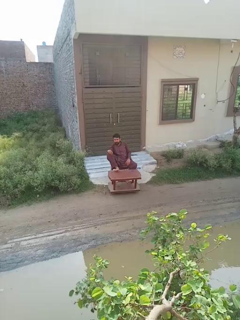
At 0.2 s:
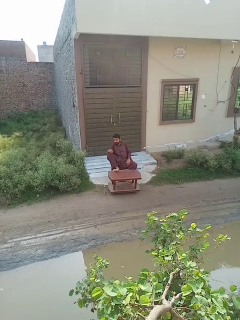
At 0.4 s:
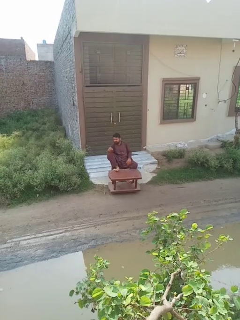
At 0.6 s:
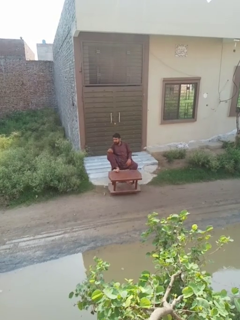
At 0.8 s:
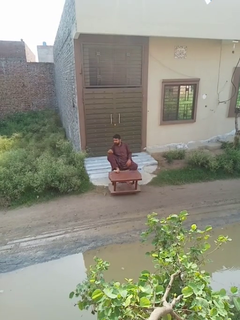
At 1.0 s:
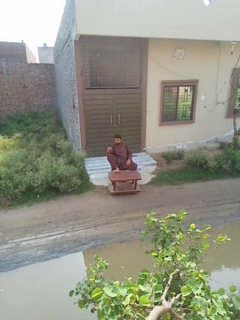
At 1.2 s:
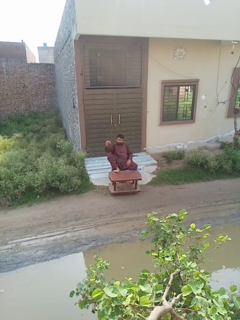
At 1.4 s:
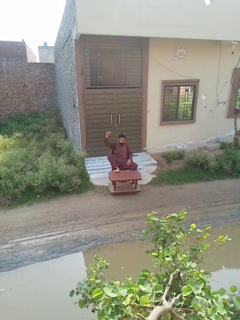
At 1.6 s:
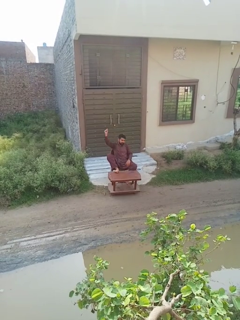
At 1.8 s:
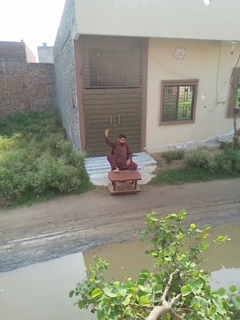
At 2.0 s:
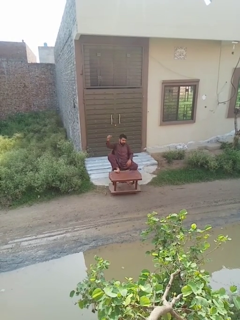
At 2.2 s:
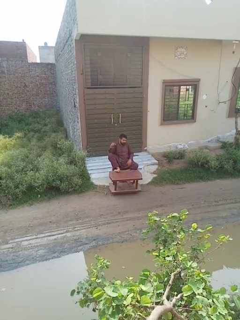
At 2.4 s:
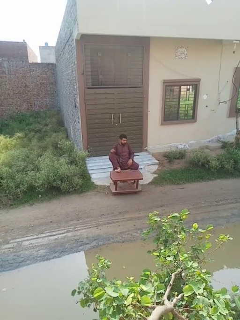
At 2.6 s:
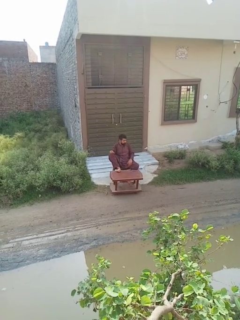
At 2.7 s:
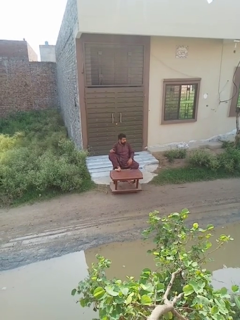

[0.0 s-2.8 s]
person snaps fingers

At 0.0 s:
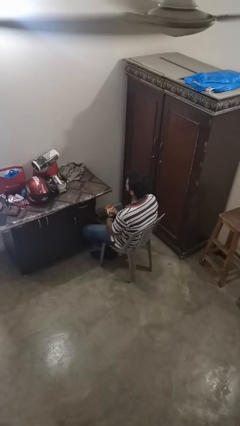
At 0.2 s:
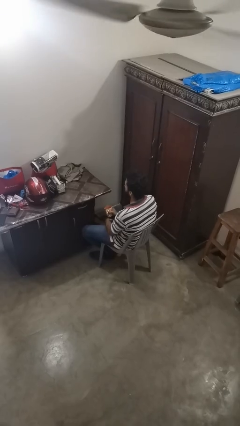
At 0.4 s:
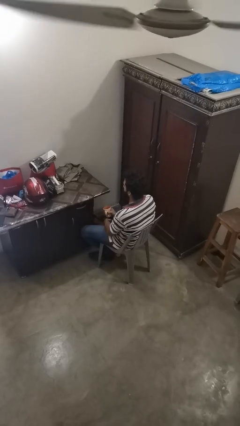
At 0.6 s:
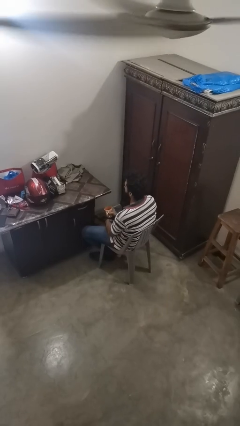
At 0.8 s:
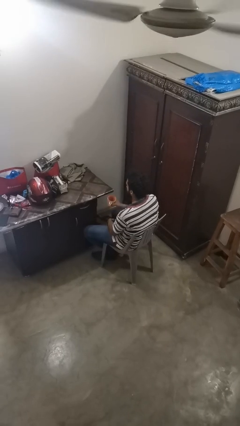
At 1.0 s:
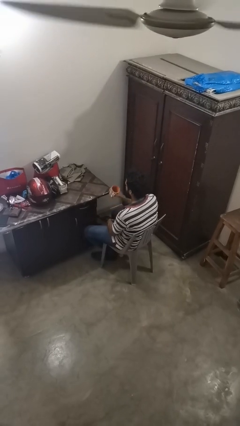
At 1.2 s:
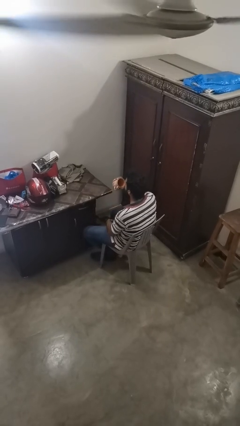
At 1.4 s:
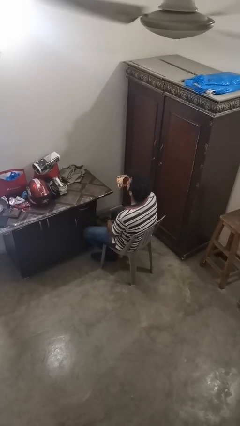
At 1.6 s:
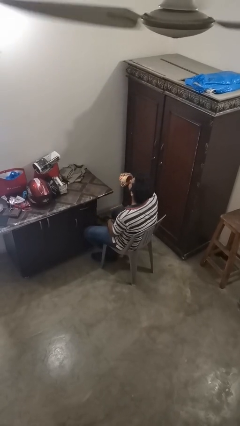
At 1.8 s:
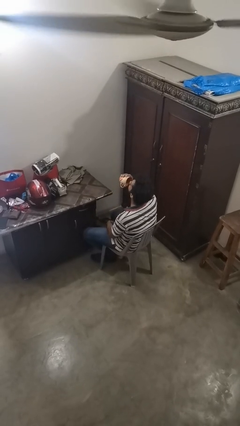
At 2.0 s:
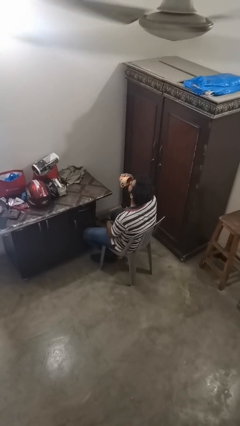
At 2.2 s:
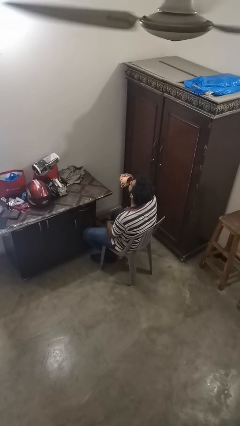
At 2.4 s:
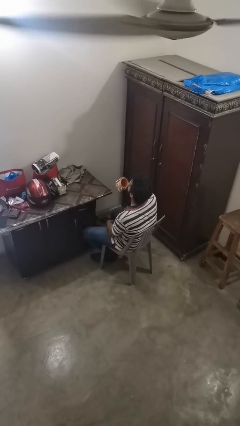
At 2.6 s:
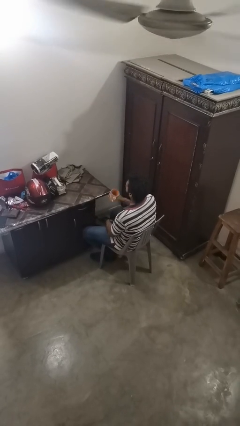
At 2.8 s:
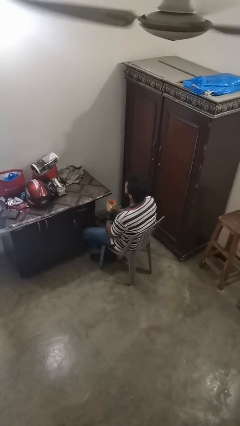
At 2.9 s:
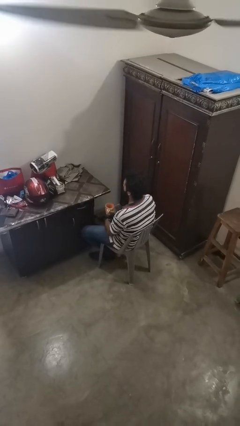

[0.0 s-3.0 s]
person drinks from mug

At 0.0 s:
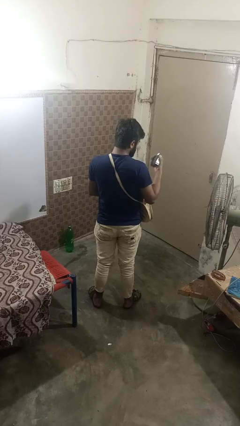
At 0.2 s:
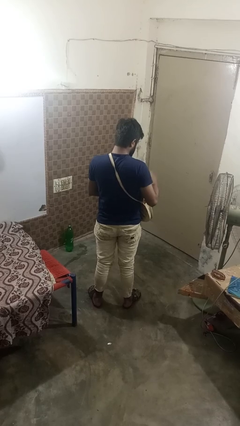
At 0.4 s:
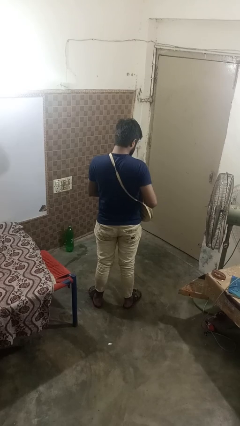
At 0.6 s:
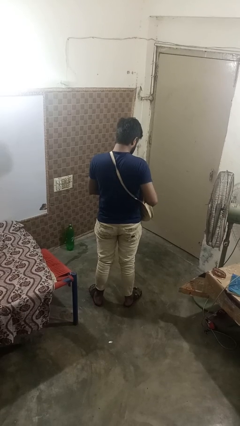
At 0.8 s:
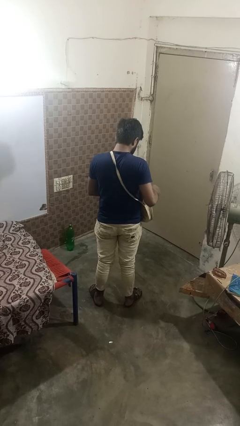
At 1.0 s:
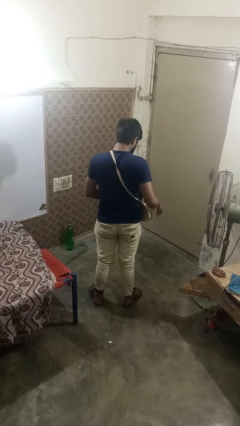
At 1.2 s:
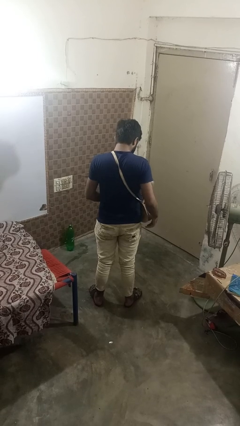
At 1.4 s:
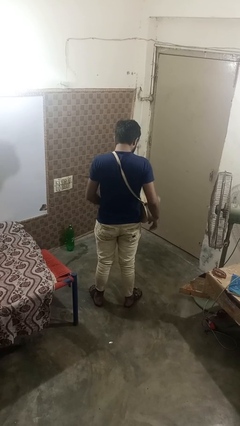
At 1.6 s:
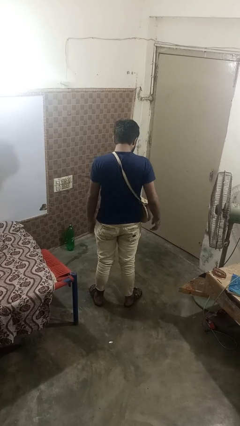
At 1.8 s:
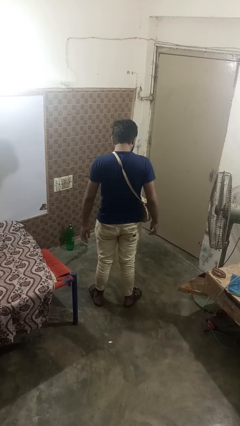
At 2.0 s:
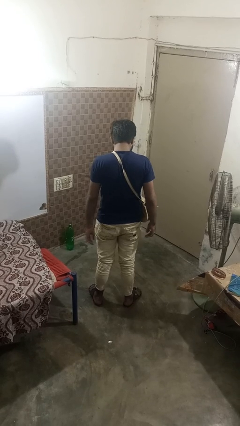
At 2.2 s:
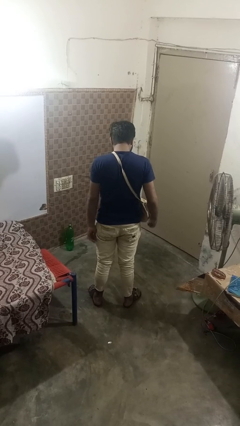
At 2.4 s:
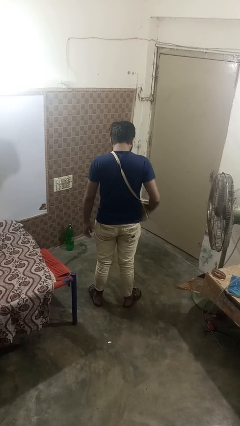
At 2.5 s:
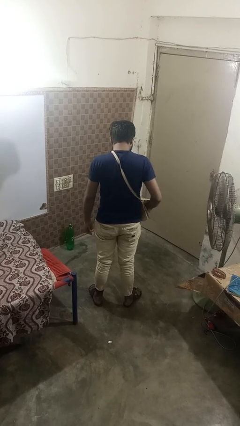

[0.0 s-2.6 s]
person puts object into purse

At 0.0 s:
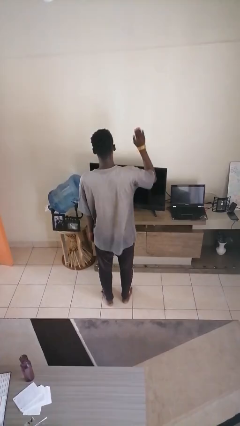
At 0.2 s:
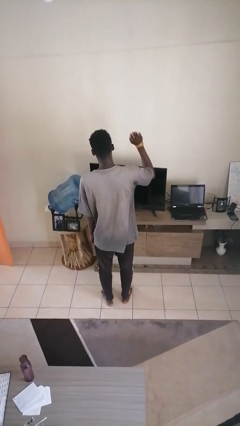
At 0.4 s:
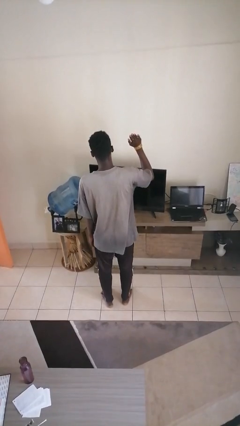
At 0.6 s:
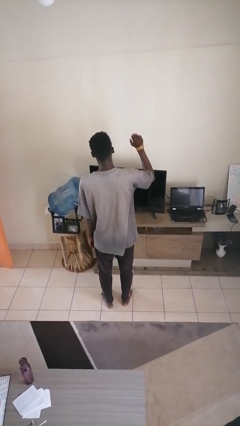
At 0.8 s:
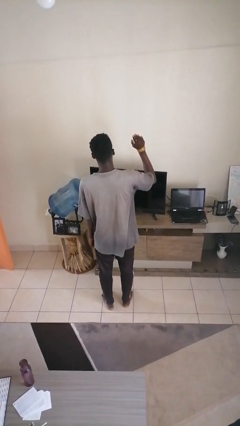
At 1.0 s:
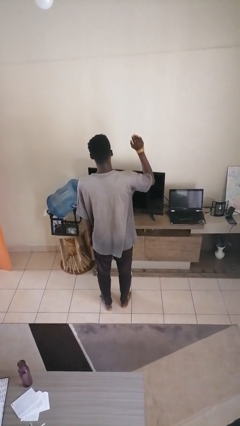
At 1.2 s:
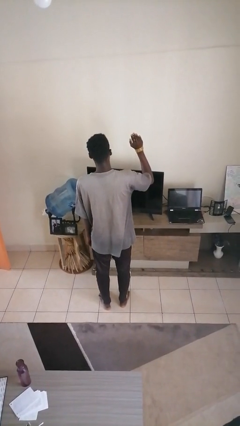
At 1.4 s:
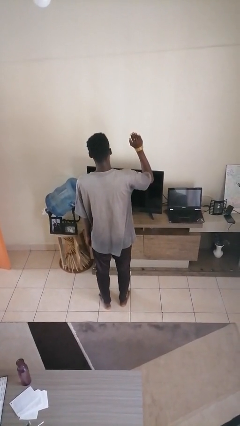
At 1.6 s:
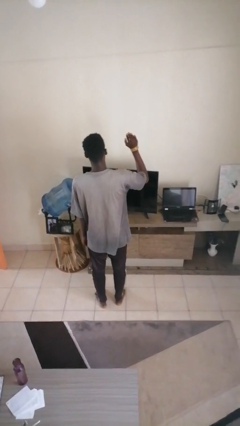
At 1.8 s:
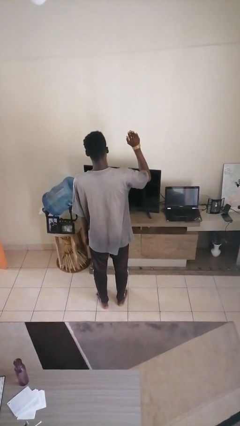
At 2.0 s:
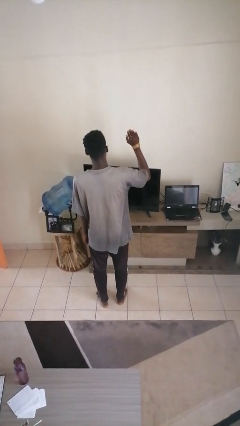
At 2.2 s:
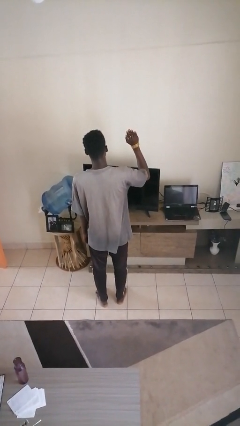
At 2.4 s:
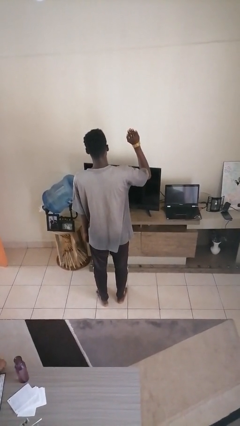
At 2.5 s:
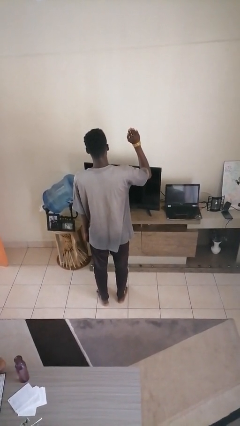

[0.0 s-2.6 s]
person gestures raise hand

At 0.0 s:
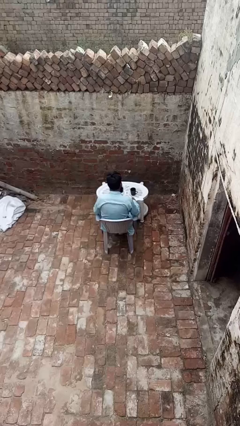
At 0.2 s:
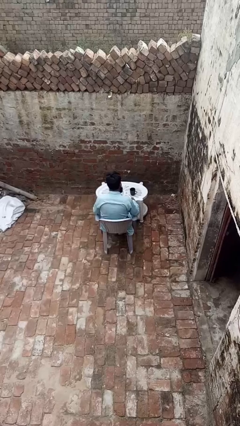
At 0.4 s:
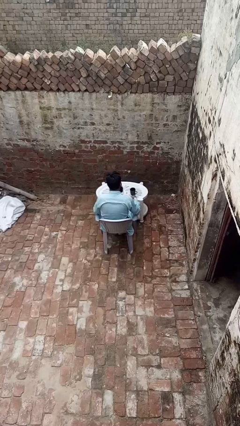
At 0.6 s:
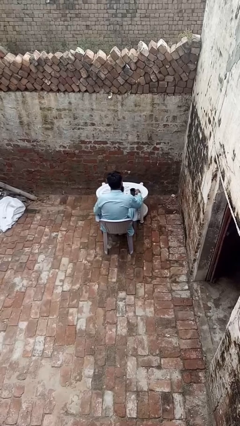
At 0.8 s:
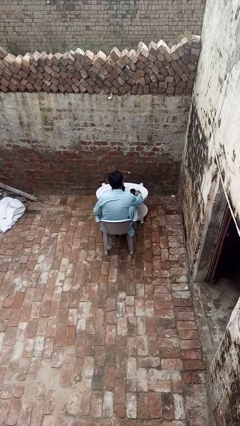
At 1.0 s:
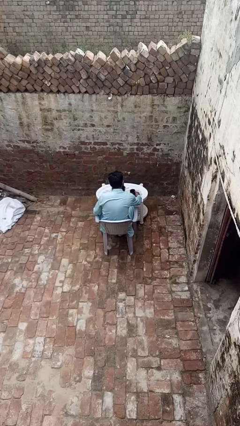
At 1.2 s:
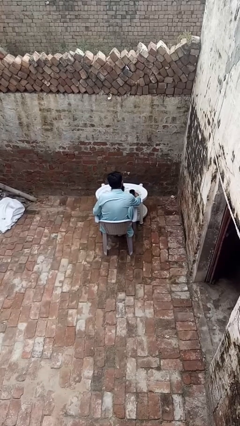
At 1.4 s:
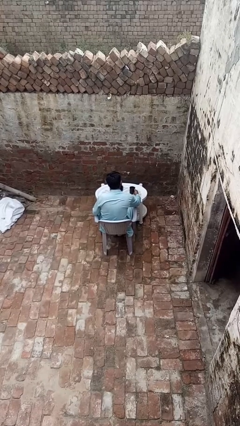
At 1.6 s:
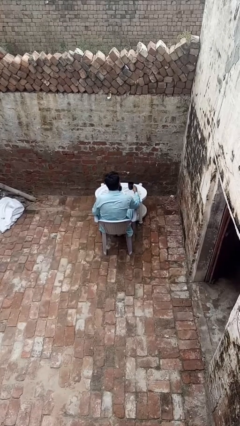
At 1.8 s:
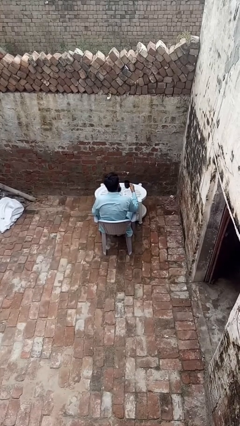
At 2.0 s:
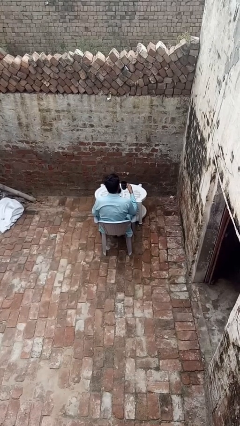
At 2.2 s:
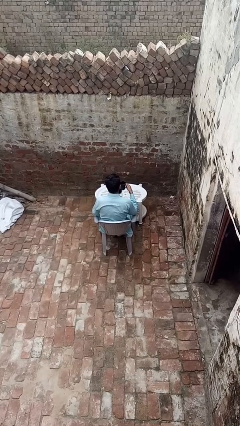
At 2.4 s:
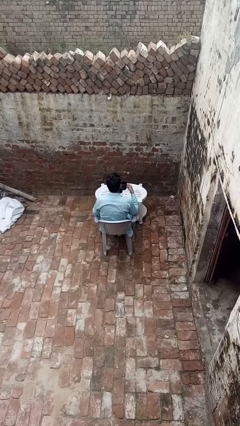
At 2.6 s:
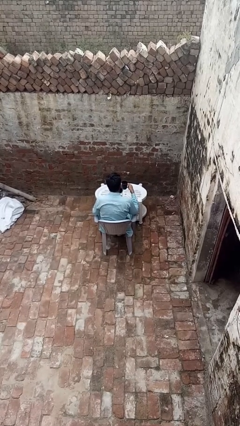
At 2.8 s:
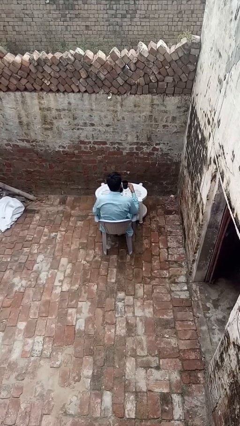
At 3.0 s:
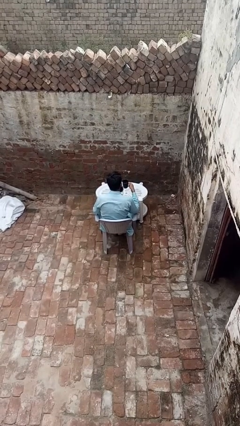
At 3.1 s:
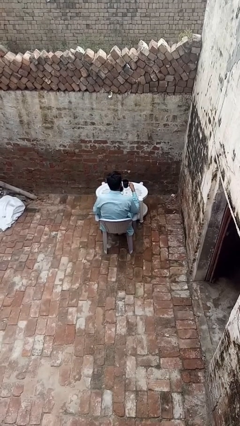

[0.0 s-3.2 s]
person picks up object from table

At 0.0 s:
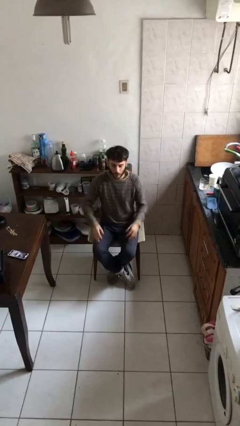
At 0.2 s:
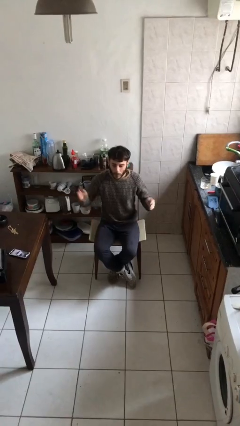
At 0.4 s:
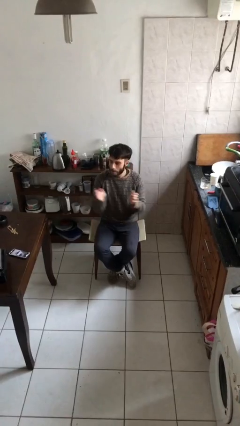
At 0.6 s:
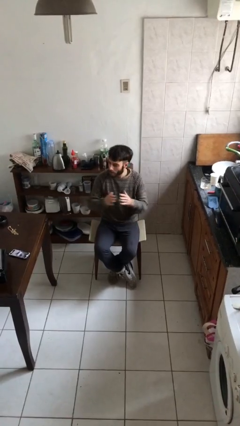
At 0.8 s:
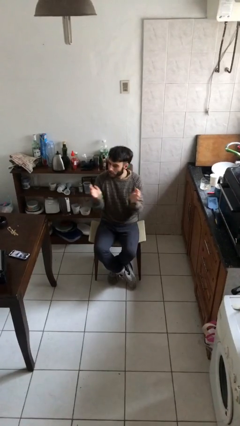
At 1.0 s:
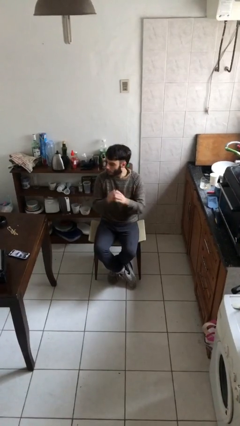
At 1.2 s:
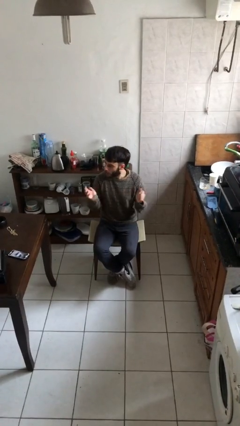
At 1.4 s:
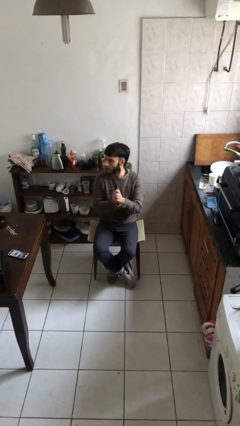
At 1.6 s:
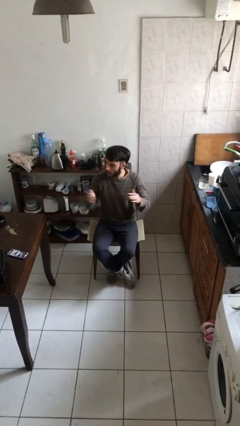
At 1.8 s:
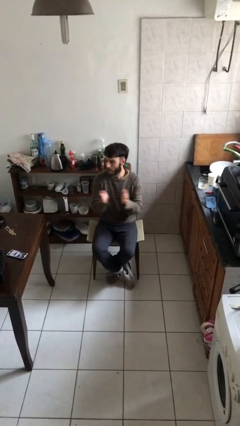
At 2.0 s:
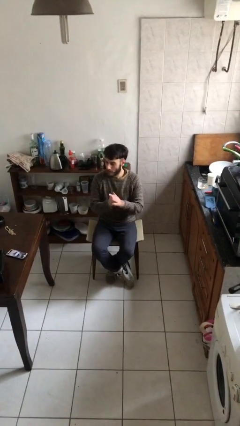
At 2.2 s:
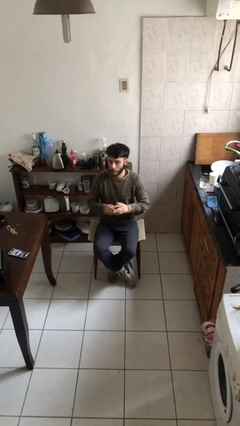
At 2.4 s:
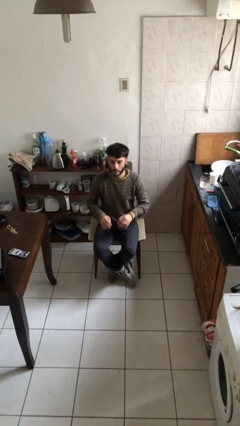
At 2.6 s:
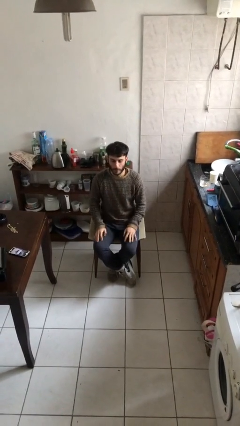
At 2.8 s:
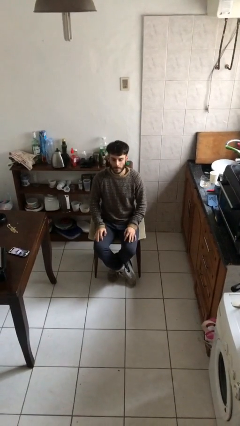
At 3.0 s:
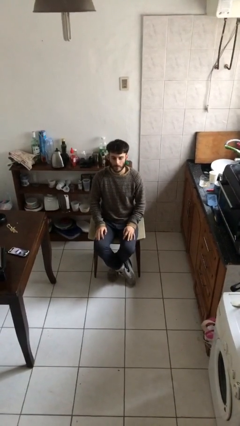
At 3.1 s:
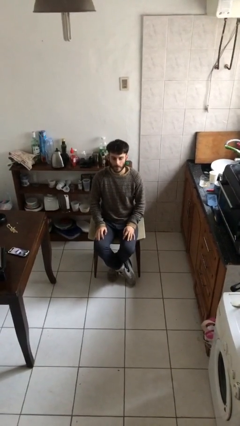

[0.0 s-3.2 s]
person claps hands

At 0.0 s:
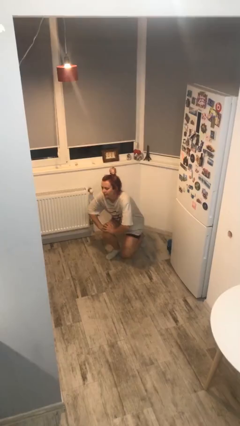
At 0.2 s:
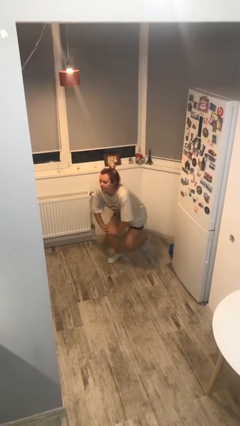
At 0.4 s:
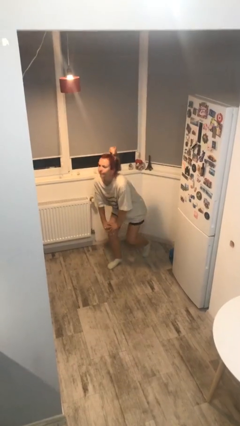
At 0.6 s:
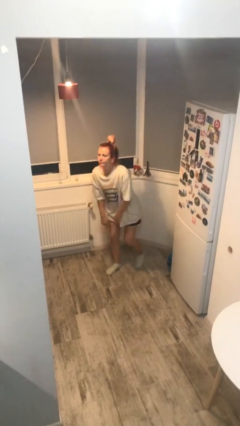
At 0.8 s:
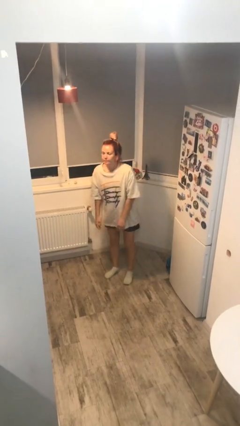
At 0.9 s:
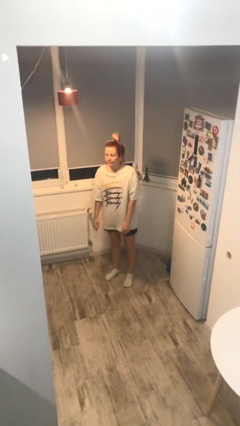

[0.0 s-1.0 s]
person stands up from floor
